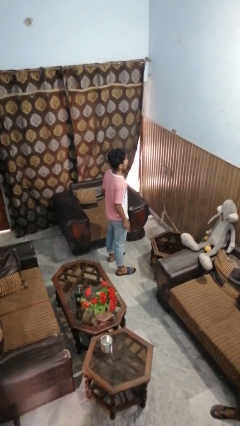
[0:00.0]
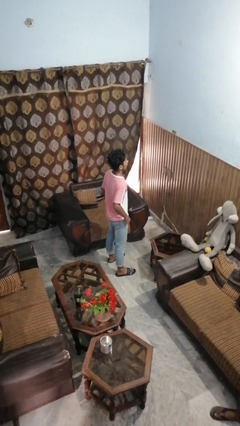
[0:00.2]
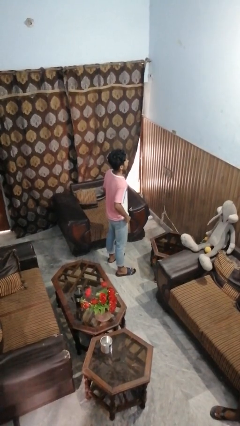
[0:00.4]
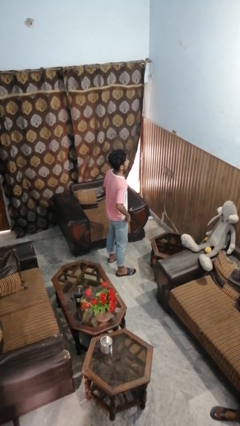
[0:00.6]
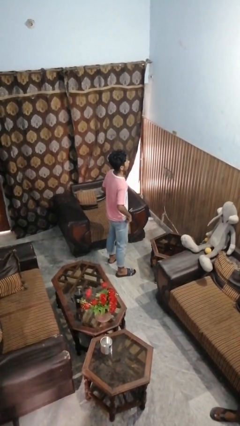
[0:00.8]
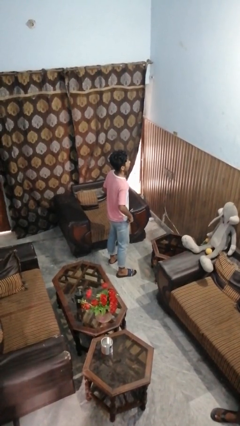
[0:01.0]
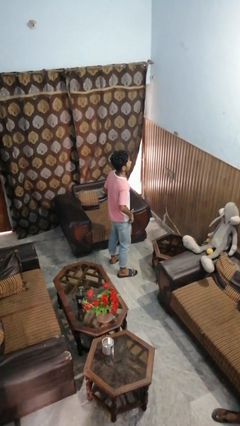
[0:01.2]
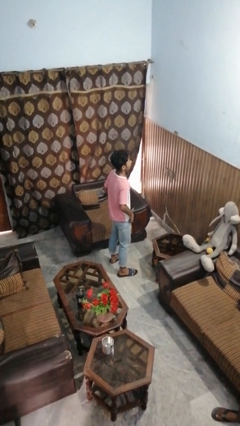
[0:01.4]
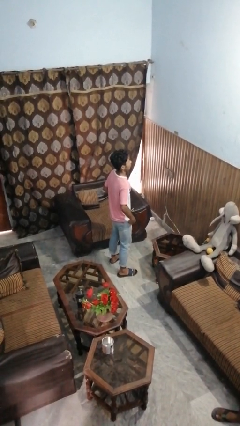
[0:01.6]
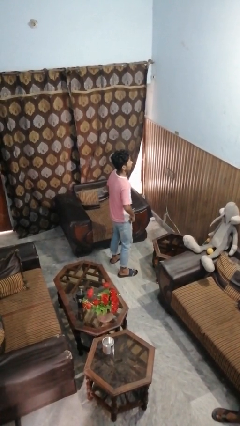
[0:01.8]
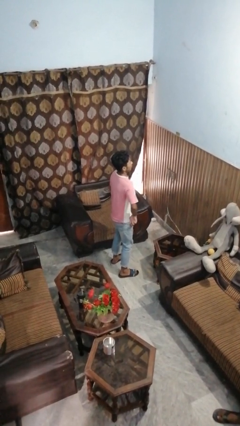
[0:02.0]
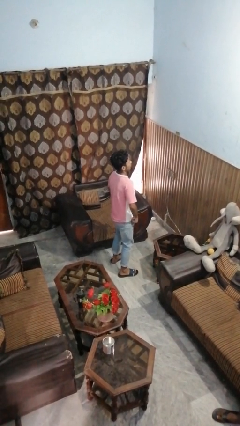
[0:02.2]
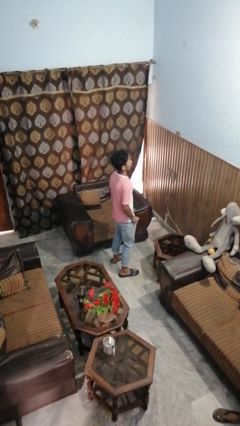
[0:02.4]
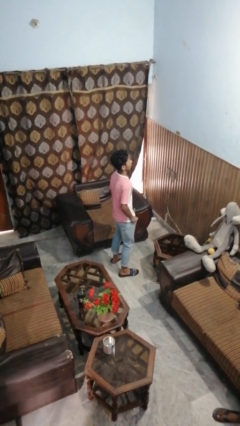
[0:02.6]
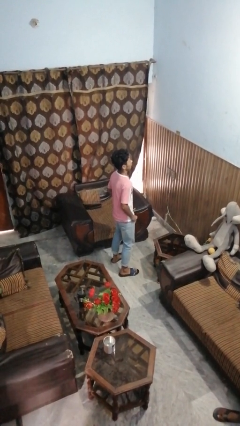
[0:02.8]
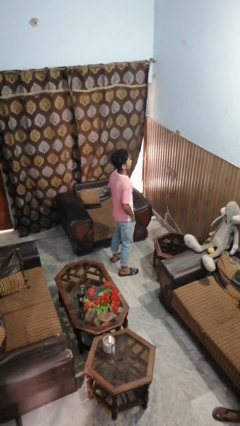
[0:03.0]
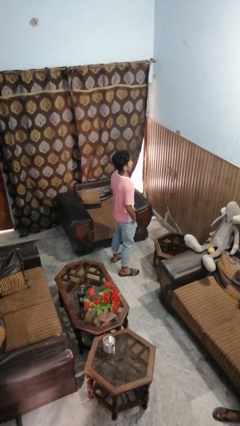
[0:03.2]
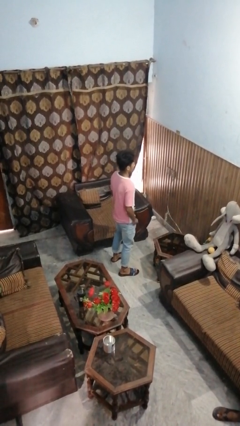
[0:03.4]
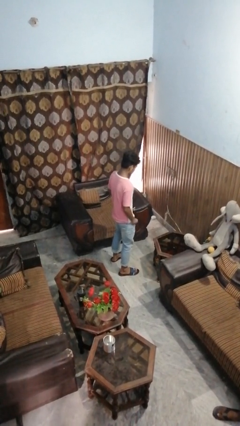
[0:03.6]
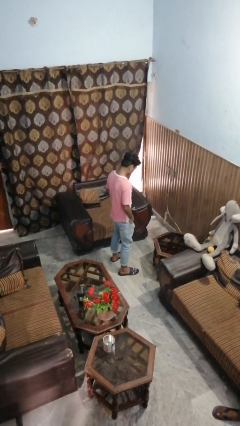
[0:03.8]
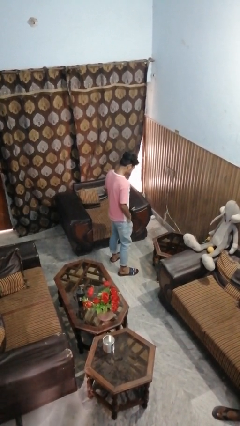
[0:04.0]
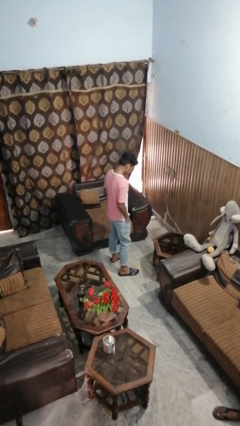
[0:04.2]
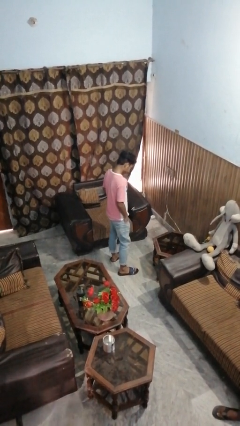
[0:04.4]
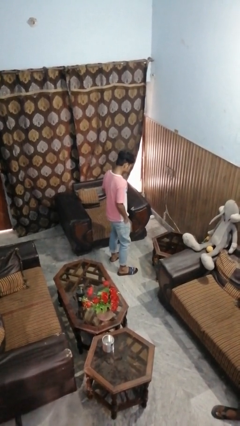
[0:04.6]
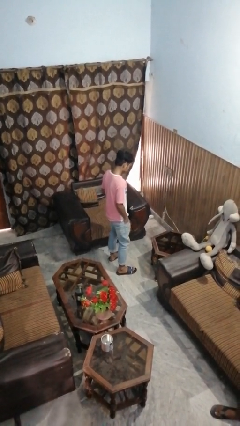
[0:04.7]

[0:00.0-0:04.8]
person puts hands in back pockets

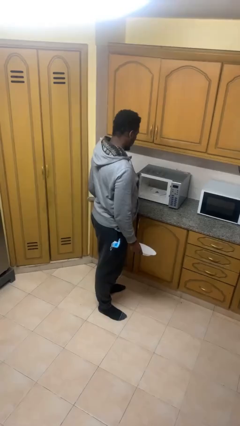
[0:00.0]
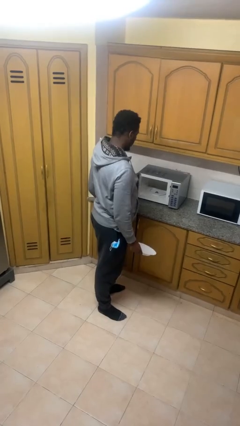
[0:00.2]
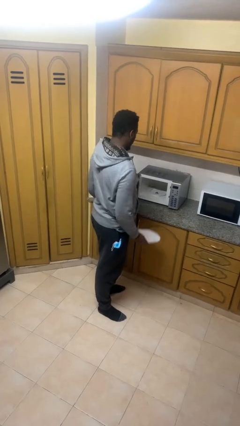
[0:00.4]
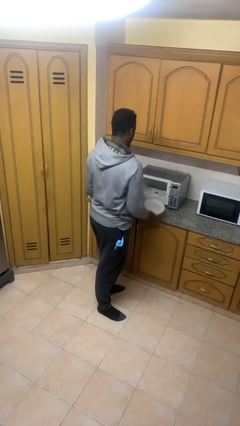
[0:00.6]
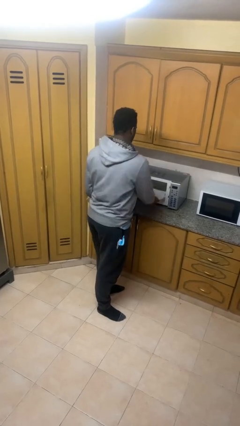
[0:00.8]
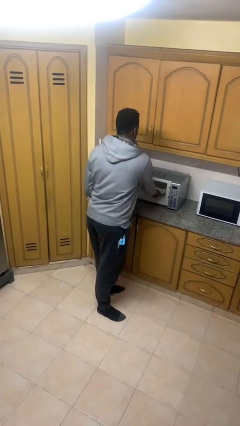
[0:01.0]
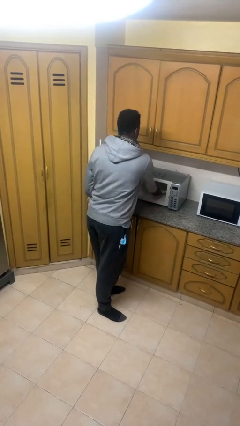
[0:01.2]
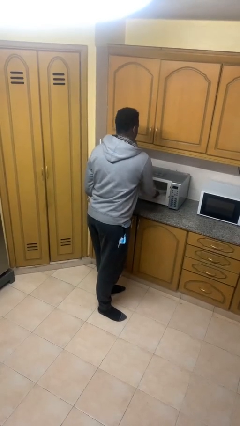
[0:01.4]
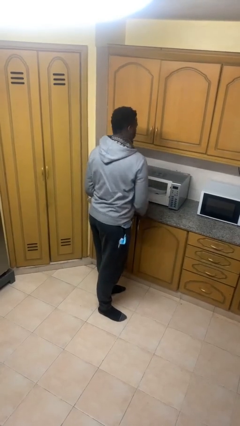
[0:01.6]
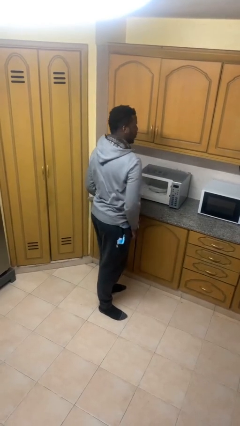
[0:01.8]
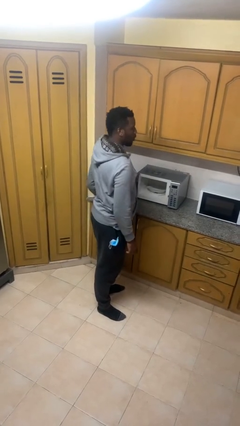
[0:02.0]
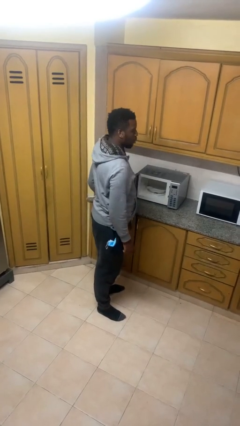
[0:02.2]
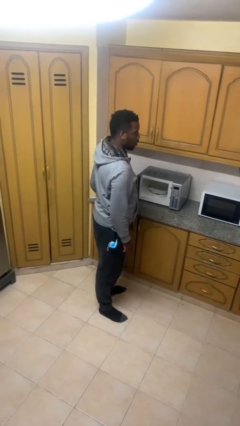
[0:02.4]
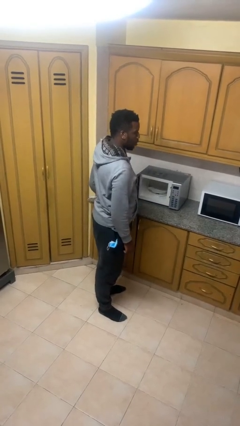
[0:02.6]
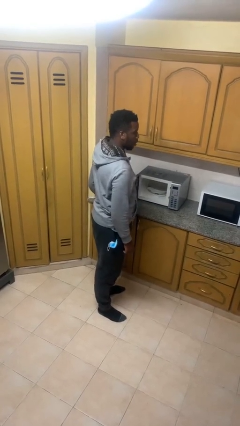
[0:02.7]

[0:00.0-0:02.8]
person puts object into microwave

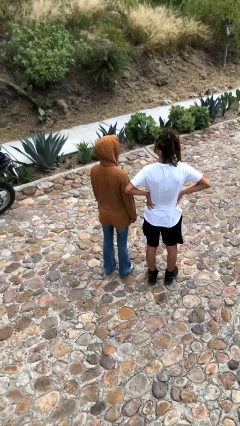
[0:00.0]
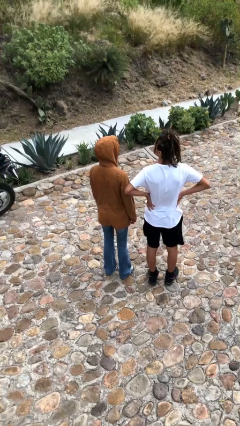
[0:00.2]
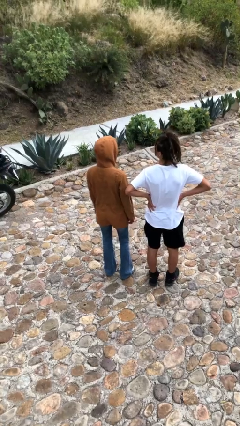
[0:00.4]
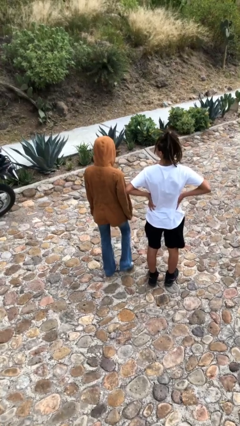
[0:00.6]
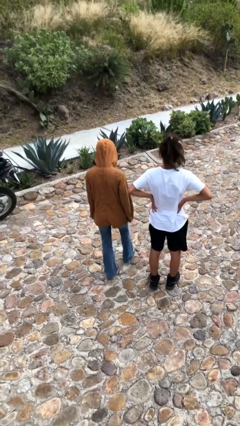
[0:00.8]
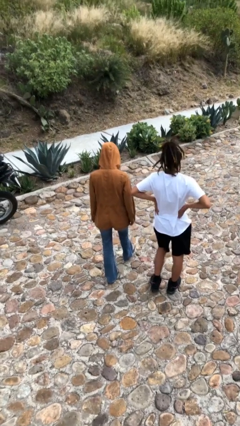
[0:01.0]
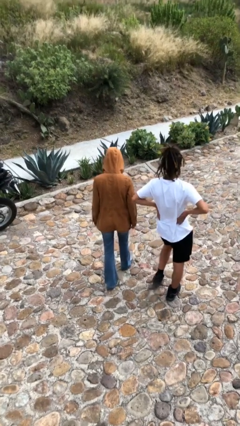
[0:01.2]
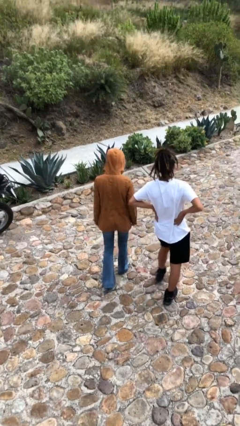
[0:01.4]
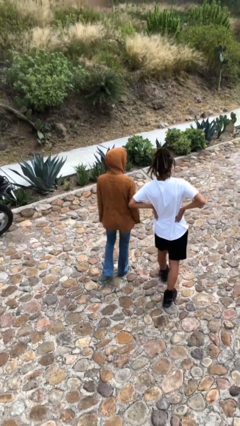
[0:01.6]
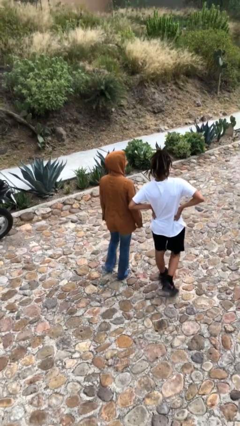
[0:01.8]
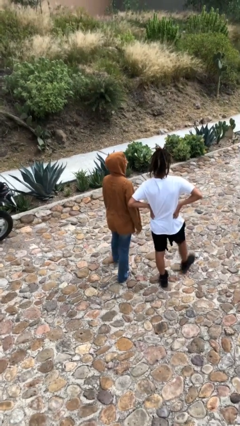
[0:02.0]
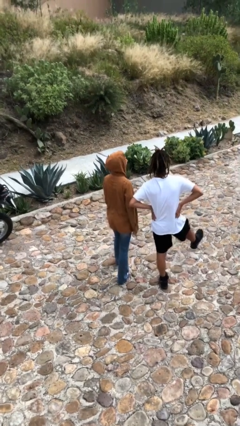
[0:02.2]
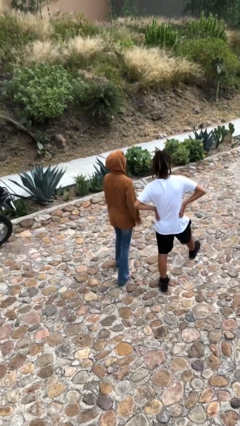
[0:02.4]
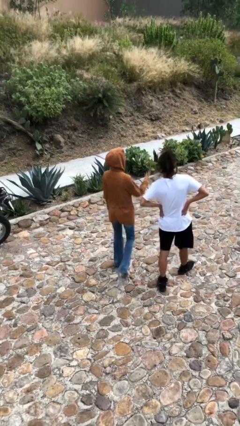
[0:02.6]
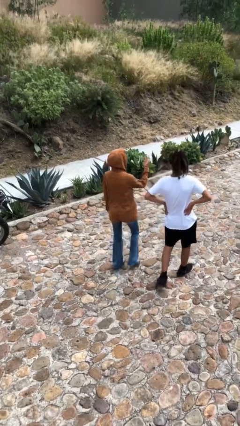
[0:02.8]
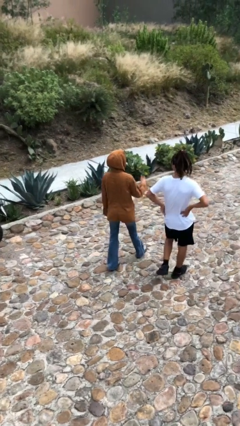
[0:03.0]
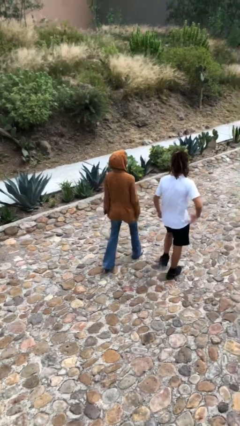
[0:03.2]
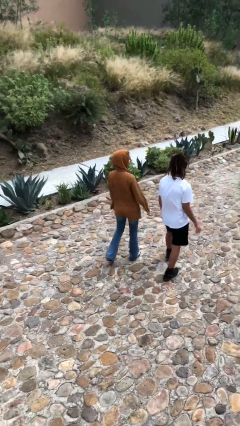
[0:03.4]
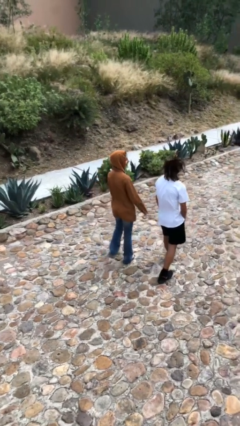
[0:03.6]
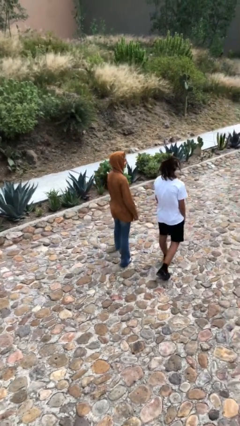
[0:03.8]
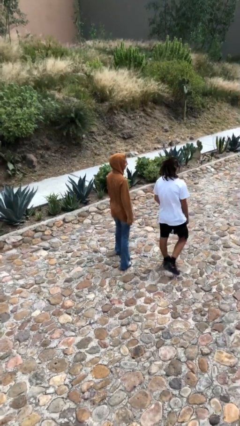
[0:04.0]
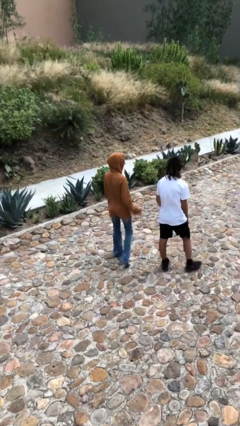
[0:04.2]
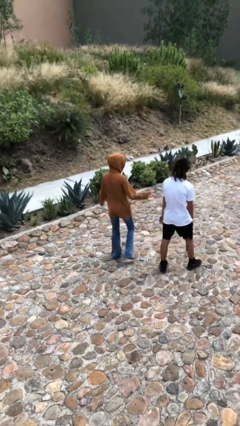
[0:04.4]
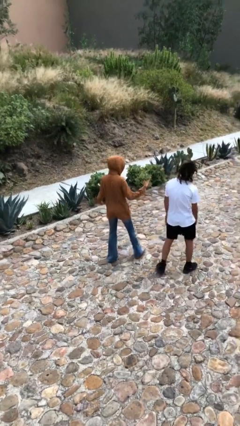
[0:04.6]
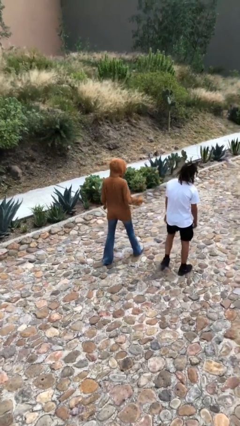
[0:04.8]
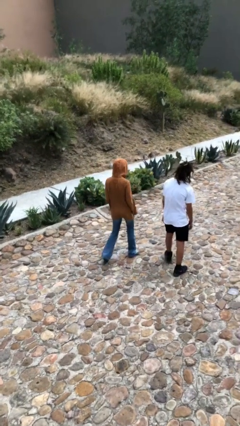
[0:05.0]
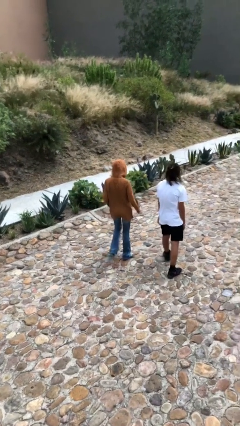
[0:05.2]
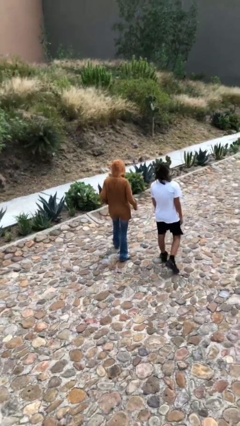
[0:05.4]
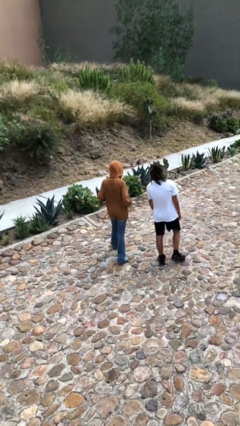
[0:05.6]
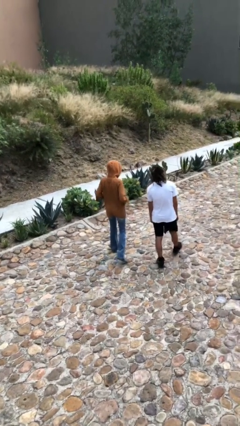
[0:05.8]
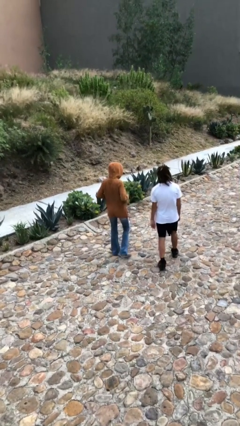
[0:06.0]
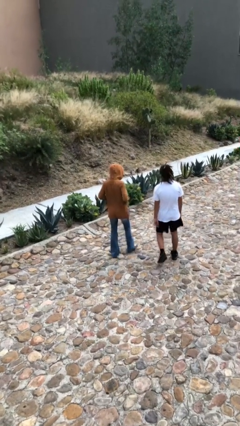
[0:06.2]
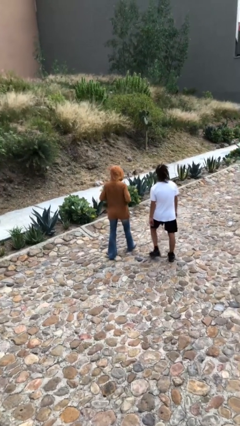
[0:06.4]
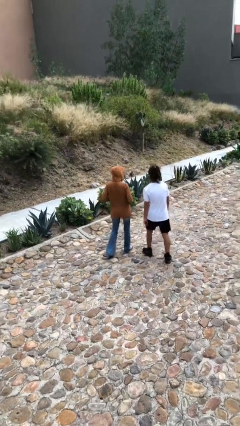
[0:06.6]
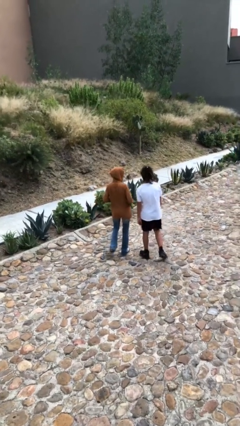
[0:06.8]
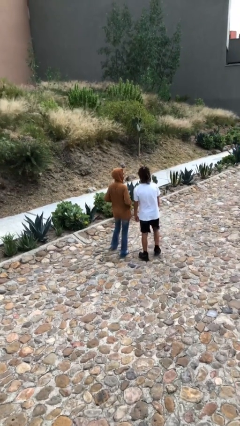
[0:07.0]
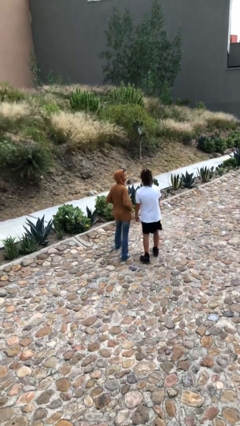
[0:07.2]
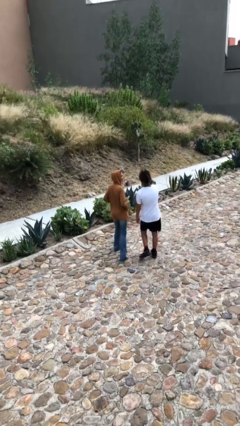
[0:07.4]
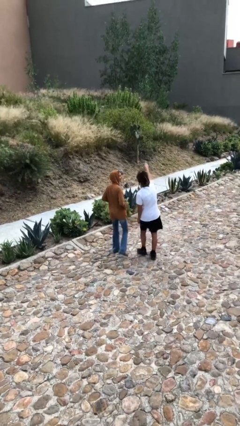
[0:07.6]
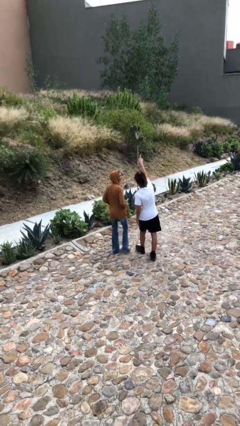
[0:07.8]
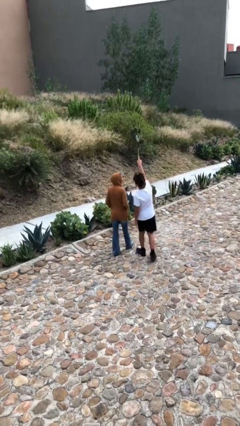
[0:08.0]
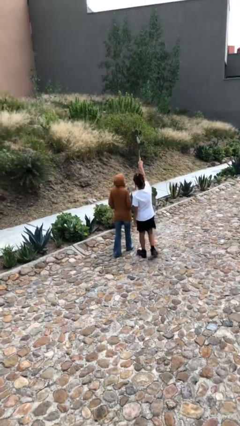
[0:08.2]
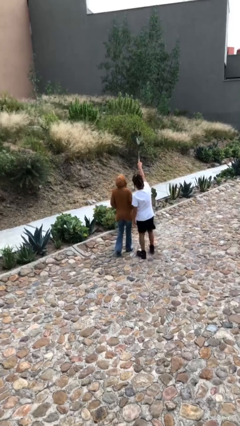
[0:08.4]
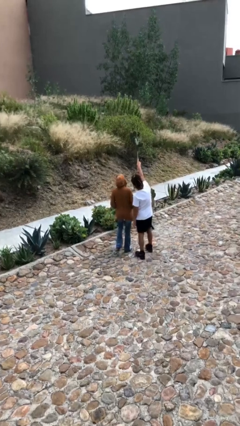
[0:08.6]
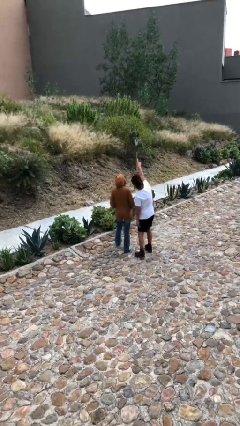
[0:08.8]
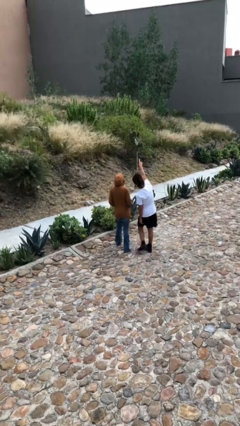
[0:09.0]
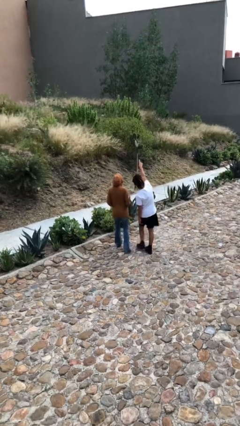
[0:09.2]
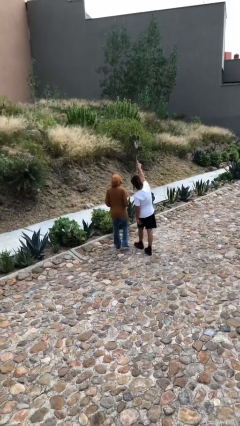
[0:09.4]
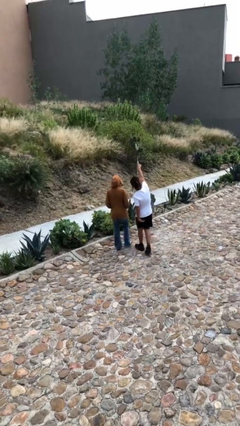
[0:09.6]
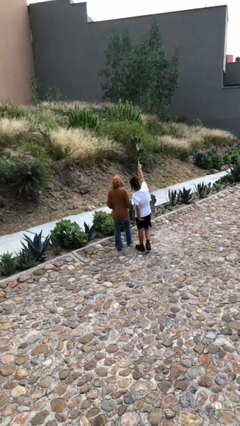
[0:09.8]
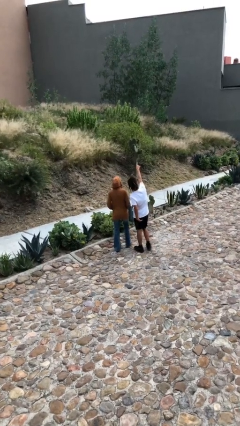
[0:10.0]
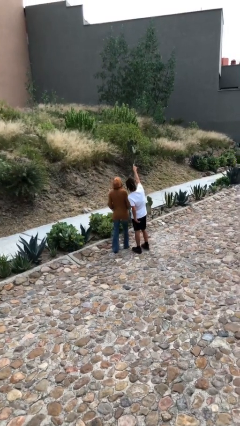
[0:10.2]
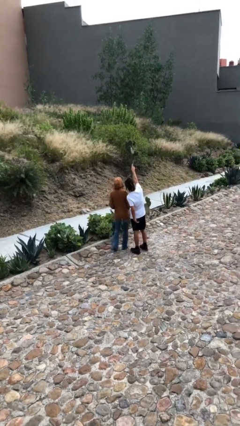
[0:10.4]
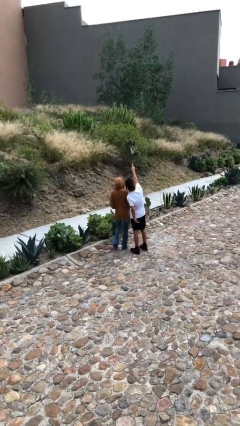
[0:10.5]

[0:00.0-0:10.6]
person talks to person
